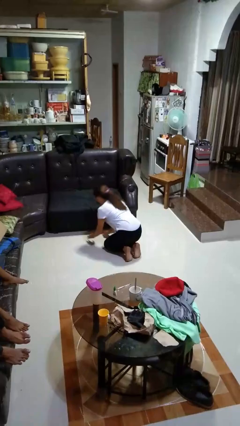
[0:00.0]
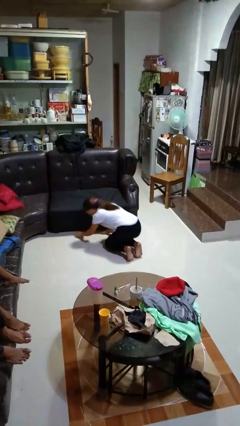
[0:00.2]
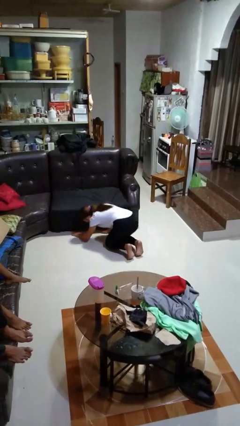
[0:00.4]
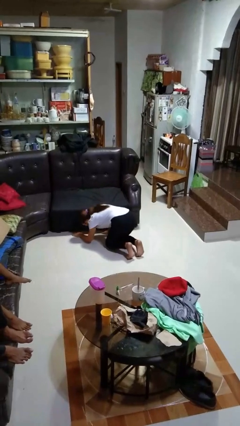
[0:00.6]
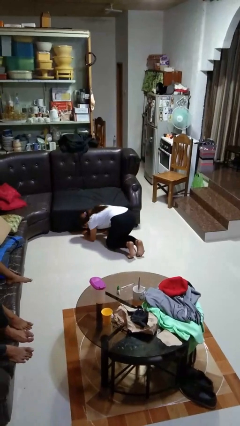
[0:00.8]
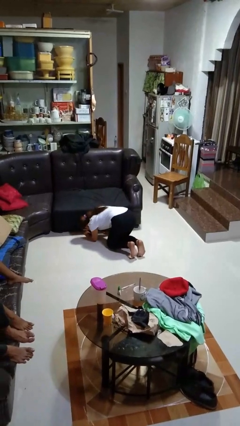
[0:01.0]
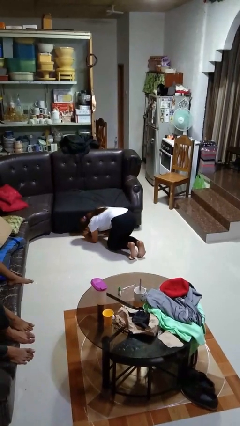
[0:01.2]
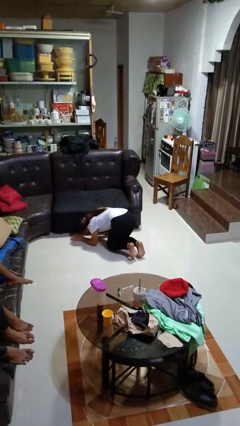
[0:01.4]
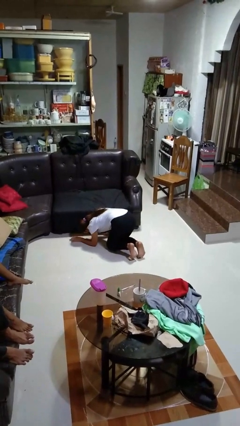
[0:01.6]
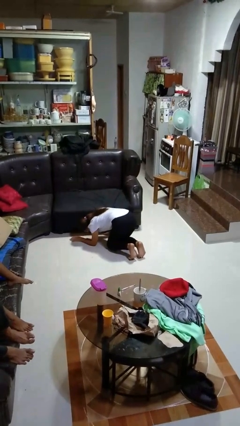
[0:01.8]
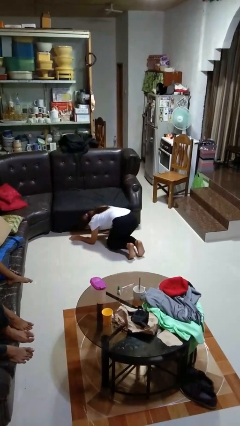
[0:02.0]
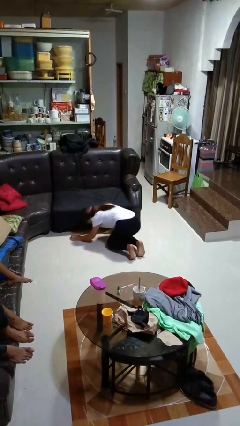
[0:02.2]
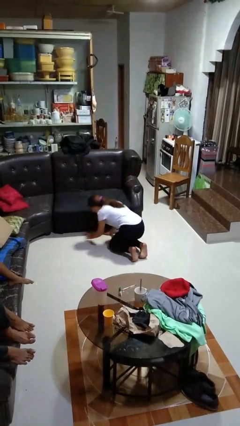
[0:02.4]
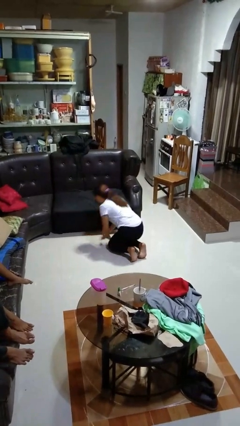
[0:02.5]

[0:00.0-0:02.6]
person searches under couch

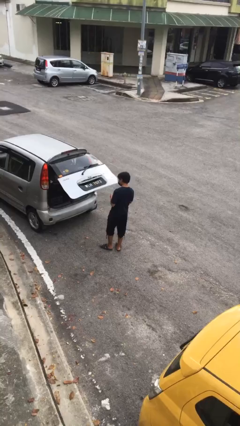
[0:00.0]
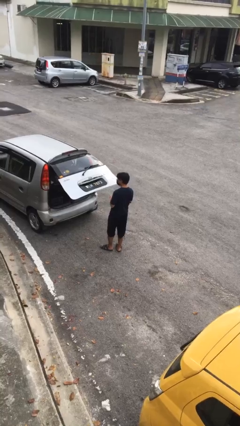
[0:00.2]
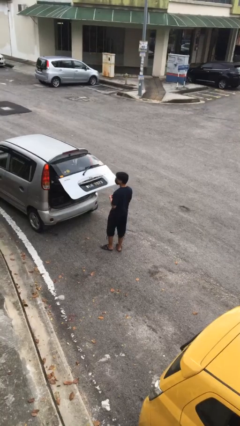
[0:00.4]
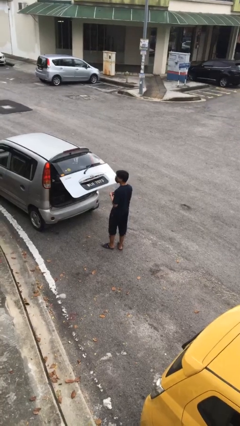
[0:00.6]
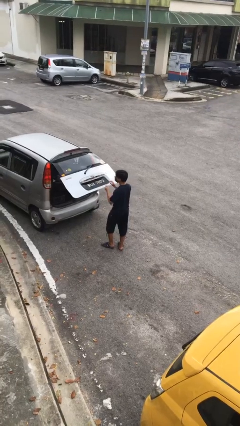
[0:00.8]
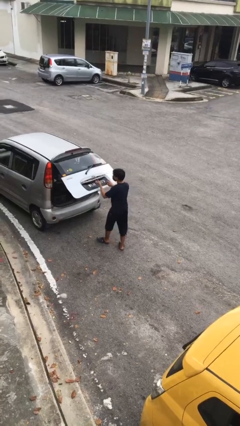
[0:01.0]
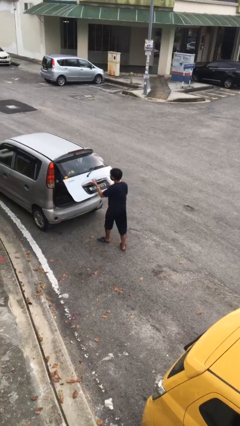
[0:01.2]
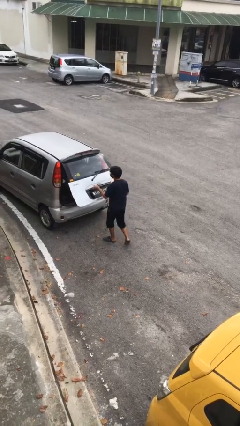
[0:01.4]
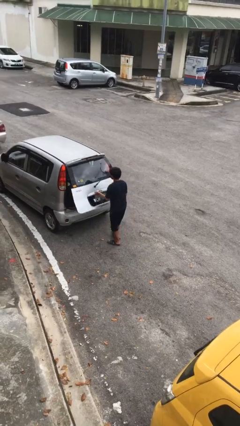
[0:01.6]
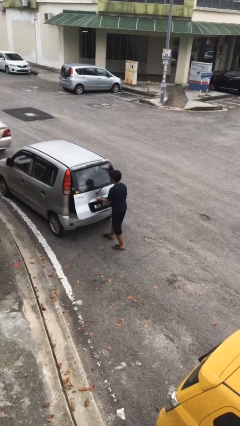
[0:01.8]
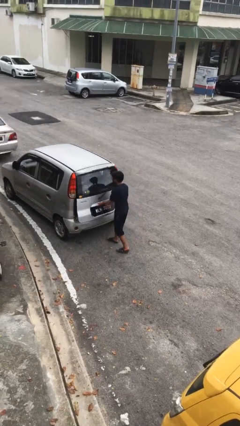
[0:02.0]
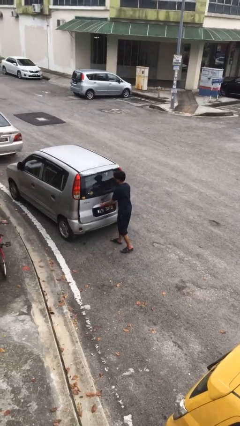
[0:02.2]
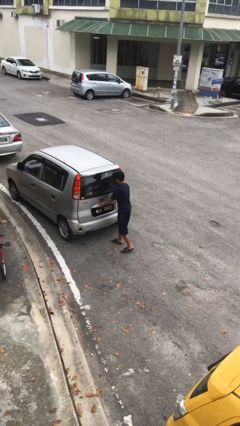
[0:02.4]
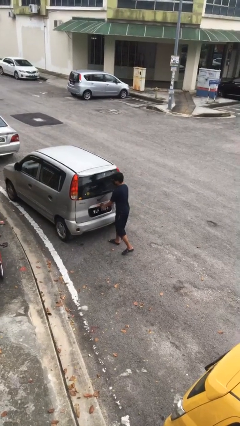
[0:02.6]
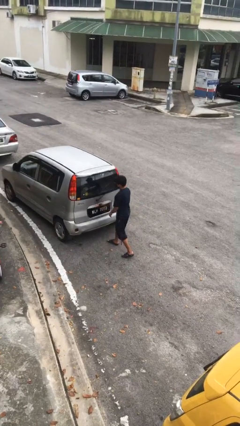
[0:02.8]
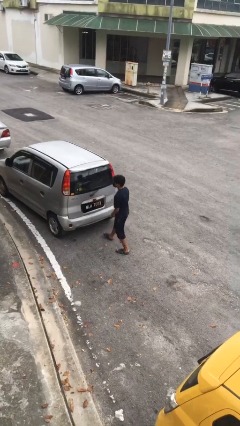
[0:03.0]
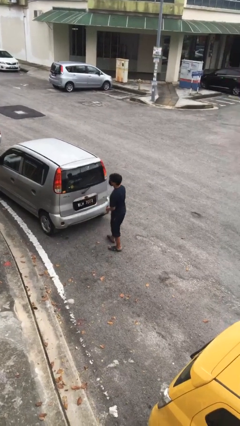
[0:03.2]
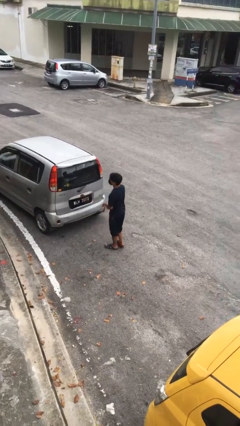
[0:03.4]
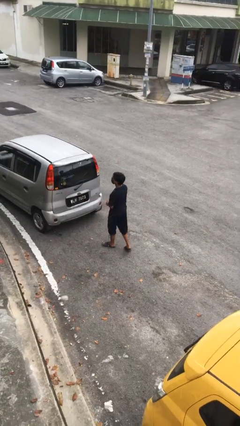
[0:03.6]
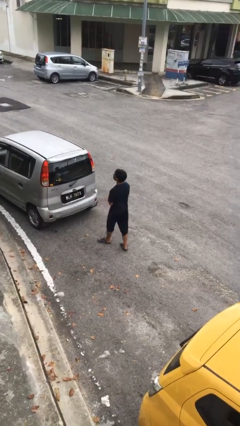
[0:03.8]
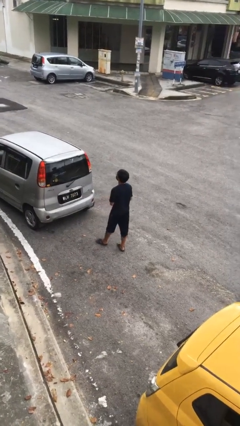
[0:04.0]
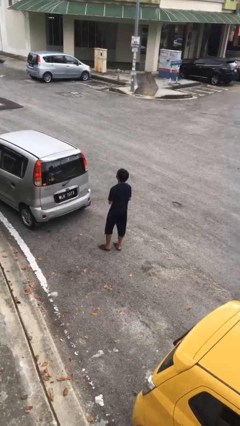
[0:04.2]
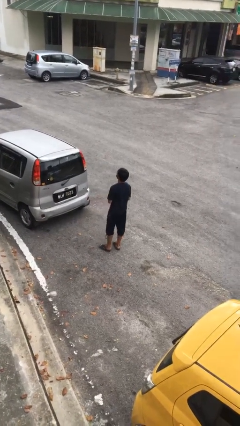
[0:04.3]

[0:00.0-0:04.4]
person closes car trunk

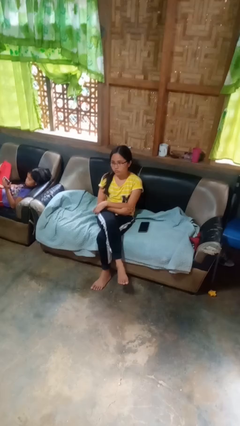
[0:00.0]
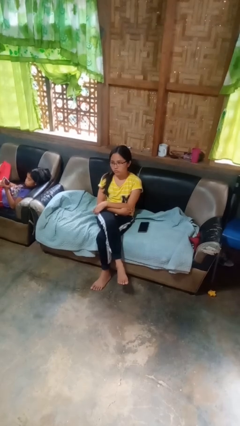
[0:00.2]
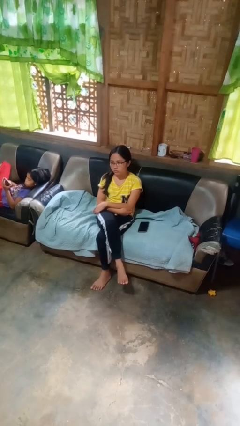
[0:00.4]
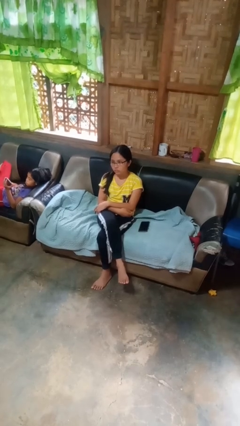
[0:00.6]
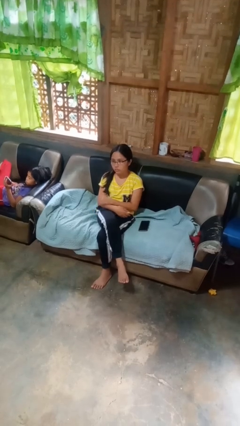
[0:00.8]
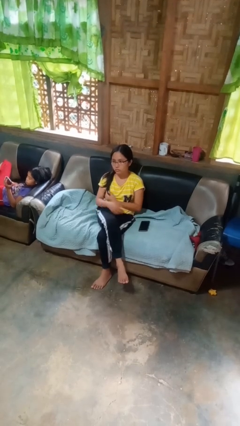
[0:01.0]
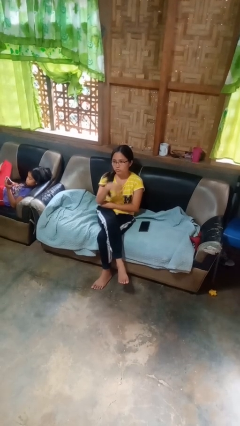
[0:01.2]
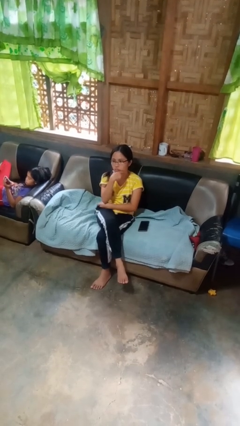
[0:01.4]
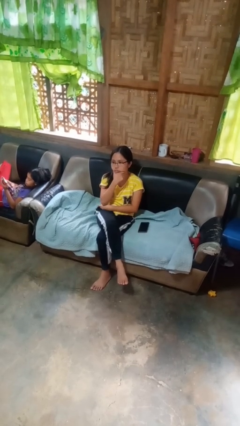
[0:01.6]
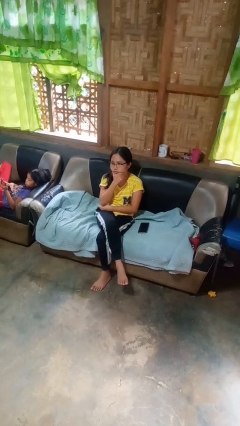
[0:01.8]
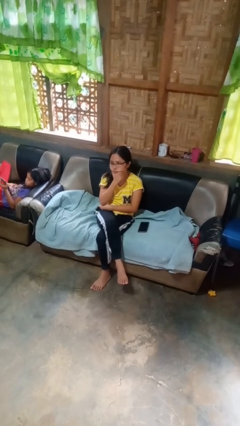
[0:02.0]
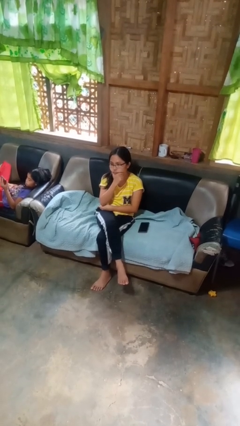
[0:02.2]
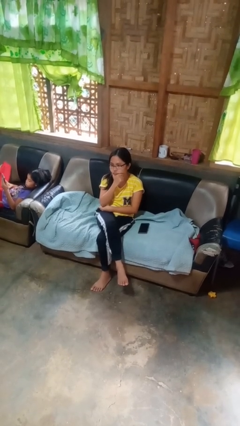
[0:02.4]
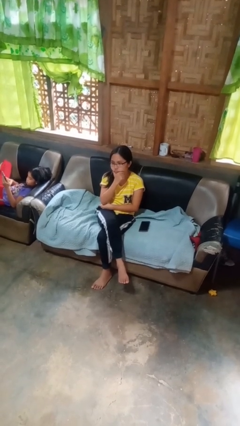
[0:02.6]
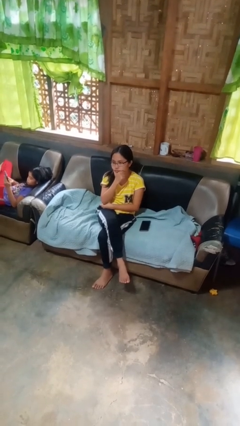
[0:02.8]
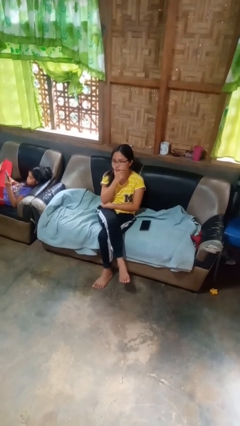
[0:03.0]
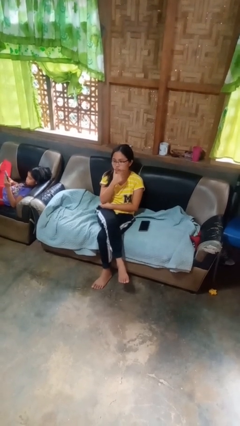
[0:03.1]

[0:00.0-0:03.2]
person strokes chin

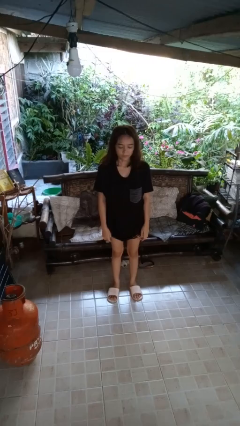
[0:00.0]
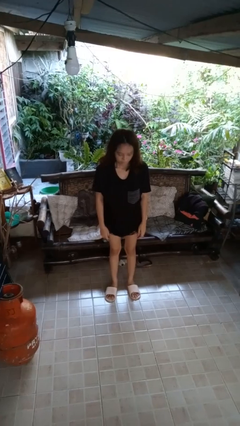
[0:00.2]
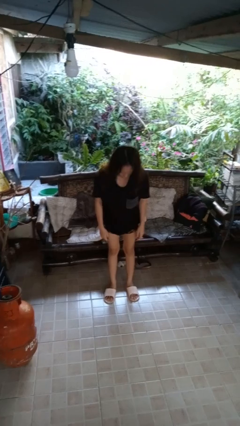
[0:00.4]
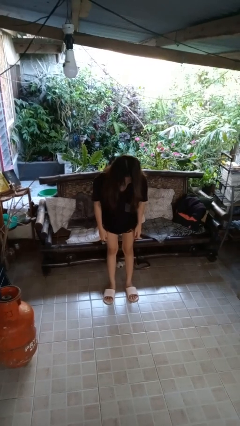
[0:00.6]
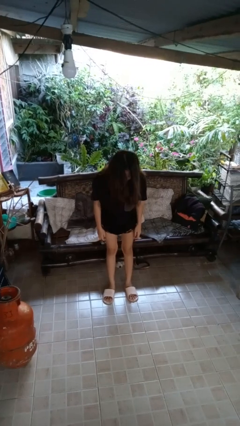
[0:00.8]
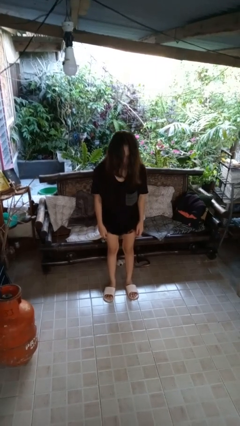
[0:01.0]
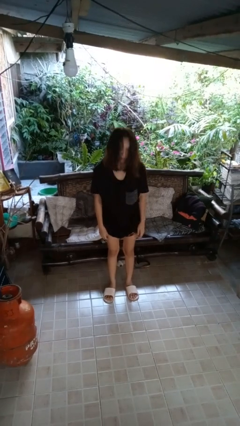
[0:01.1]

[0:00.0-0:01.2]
person bows

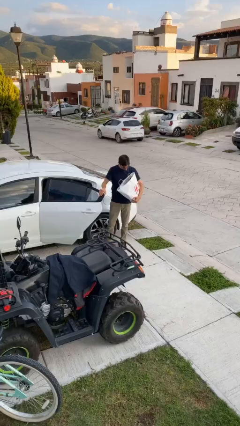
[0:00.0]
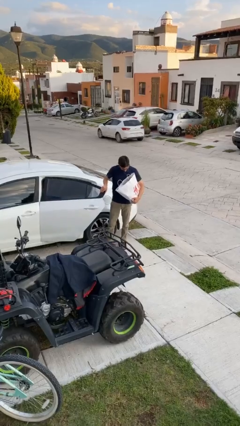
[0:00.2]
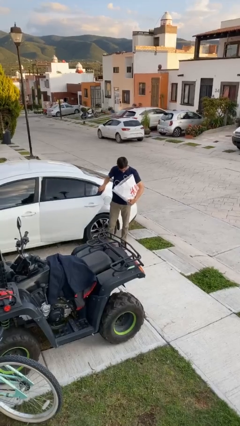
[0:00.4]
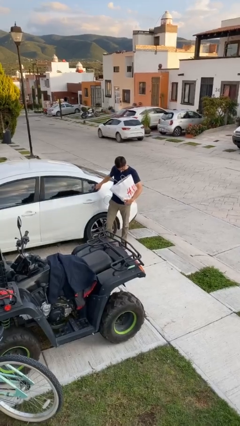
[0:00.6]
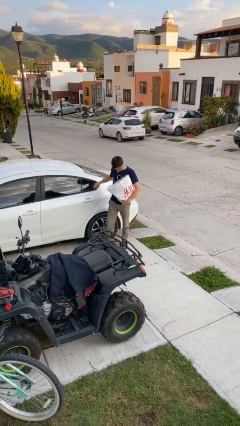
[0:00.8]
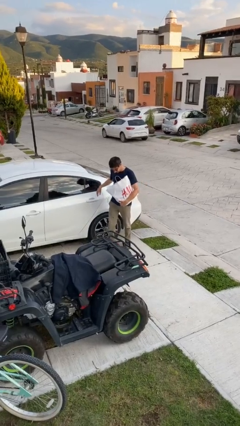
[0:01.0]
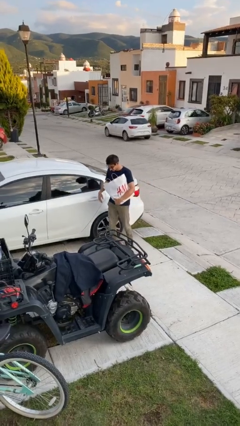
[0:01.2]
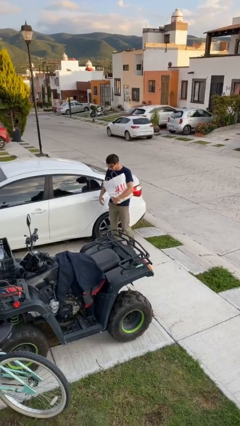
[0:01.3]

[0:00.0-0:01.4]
person closes car door

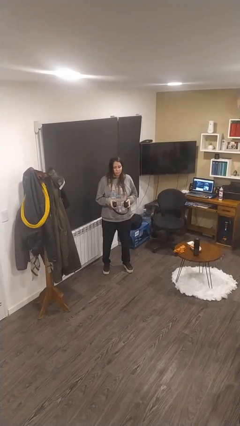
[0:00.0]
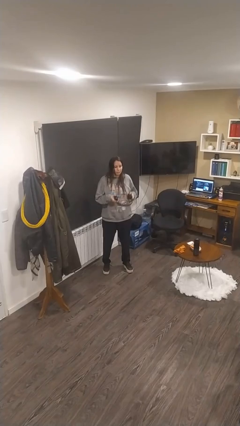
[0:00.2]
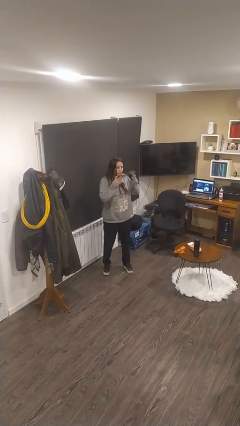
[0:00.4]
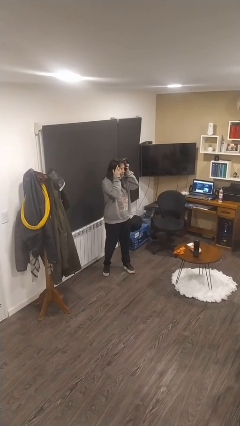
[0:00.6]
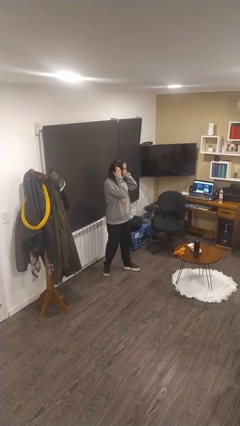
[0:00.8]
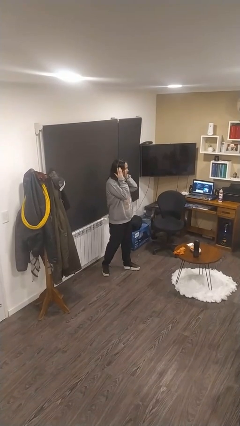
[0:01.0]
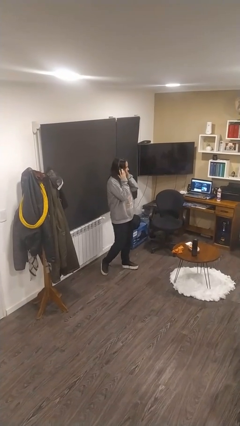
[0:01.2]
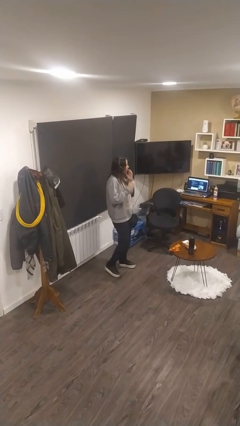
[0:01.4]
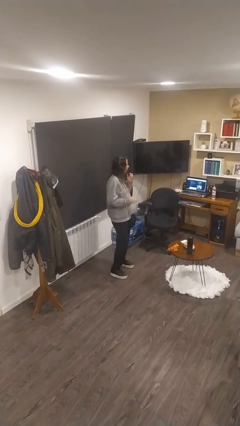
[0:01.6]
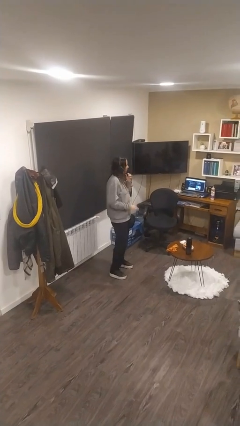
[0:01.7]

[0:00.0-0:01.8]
person puts on headphones

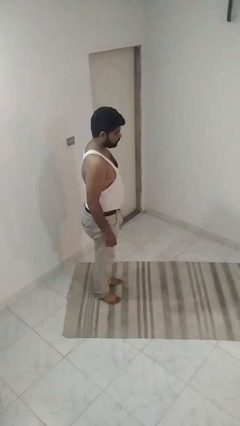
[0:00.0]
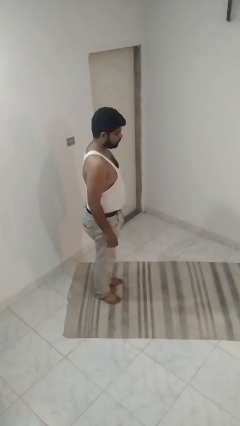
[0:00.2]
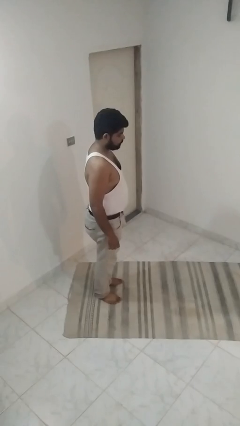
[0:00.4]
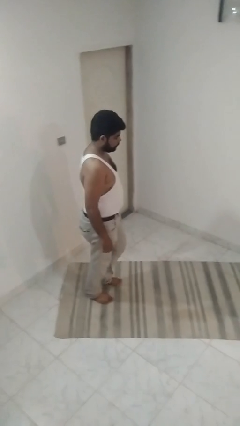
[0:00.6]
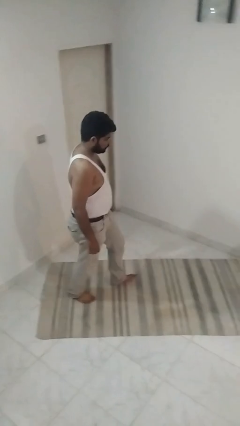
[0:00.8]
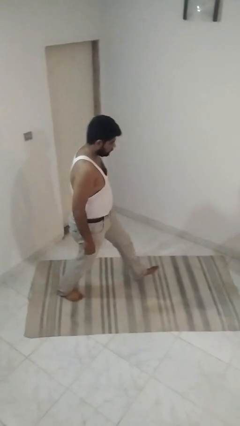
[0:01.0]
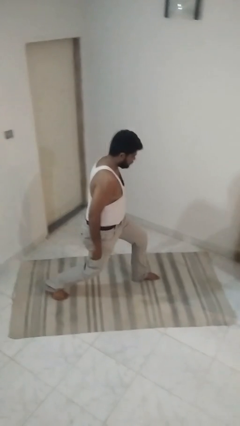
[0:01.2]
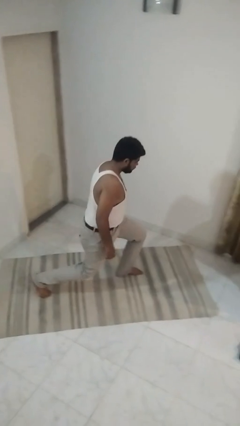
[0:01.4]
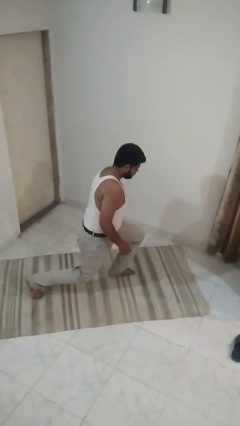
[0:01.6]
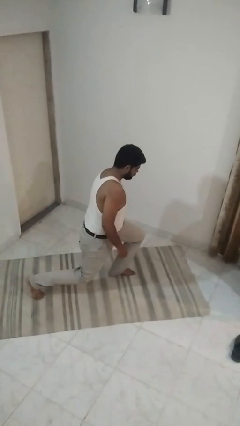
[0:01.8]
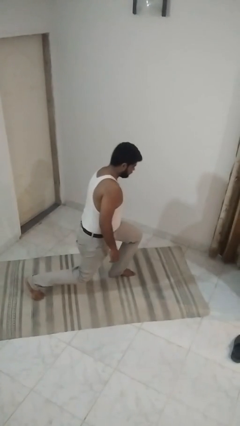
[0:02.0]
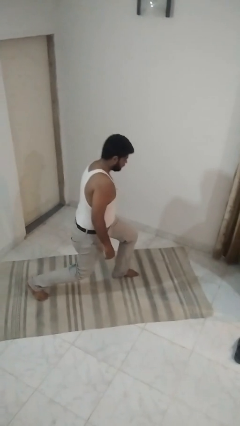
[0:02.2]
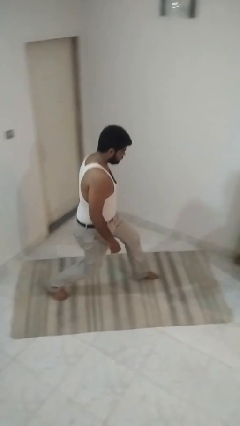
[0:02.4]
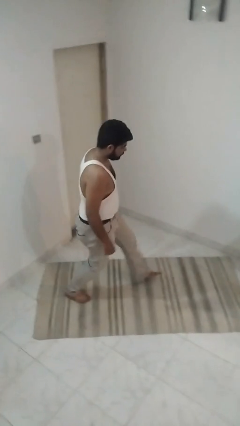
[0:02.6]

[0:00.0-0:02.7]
person exercises with lunges
